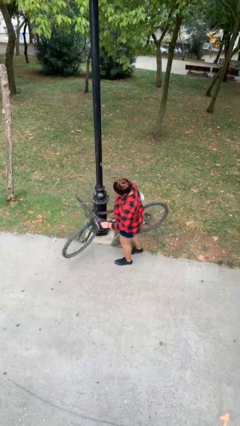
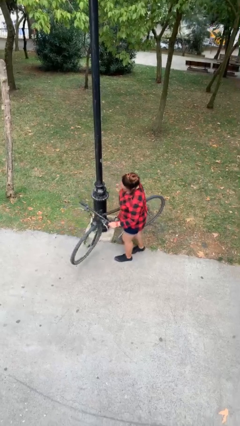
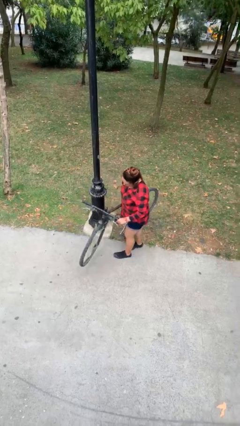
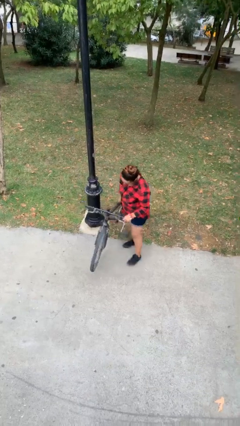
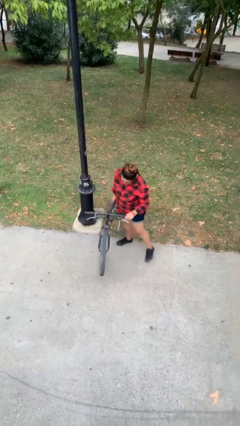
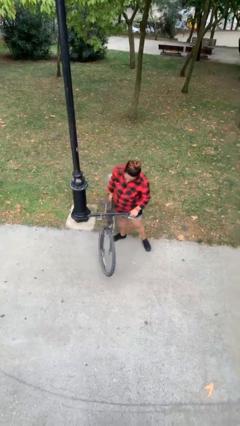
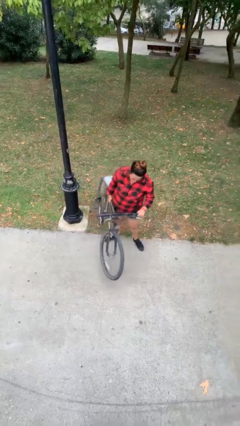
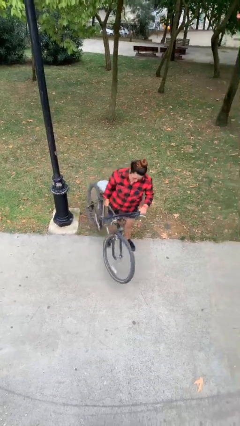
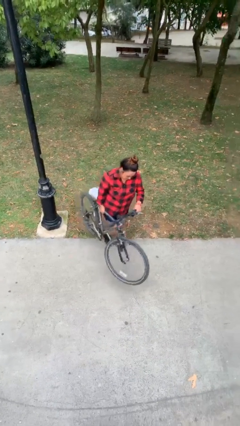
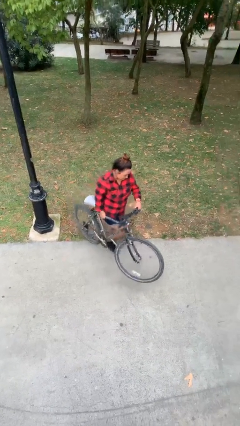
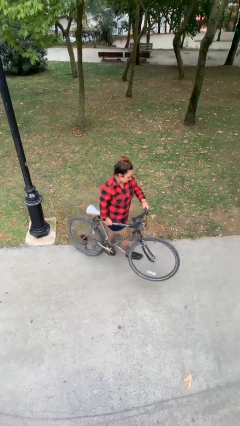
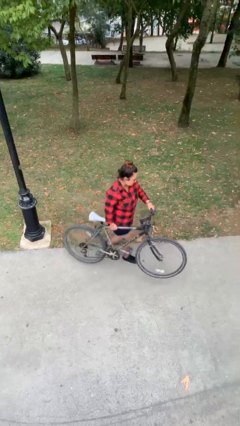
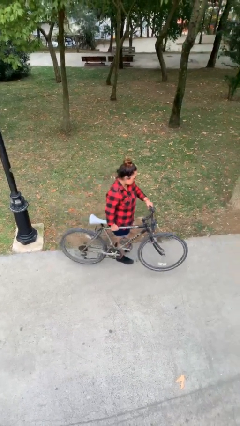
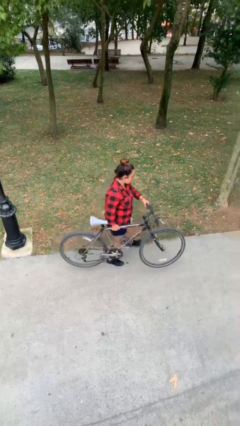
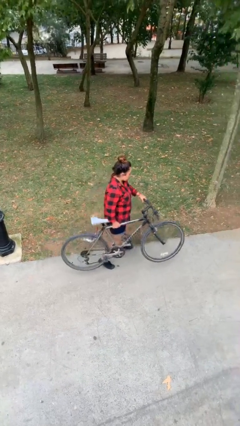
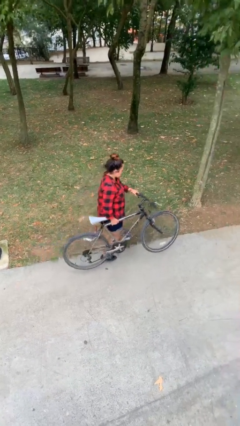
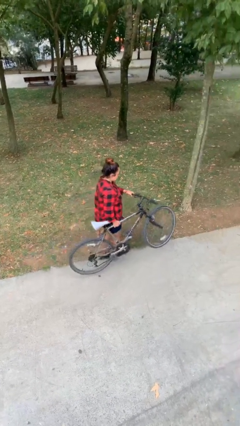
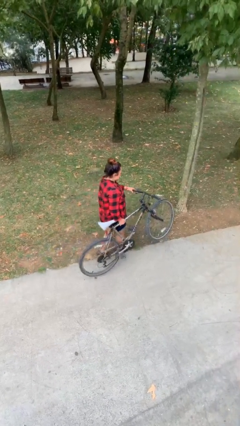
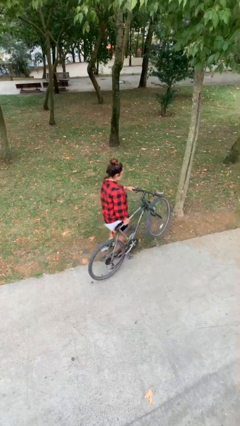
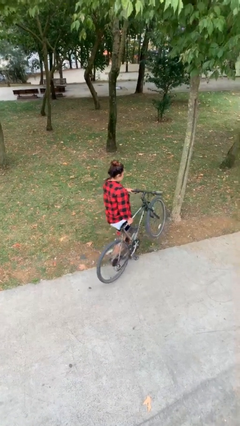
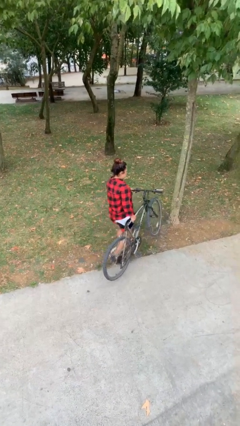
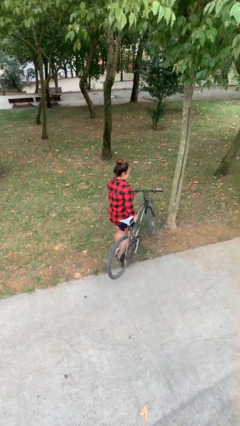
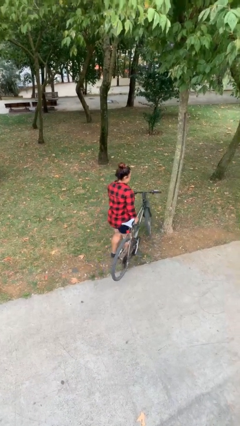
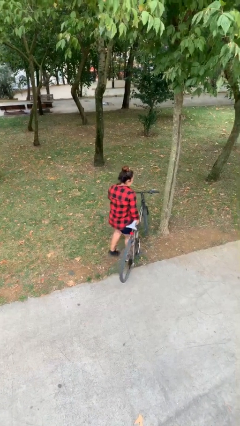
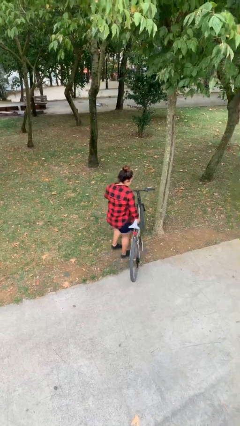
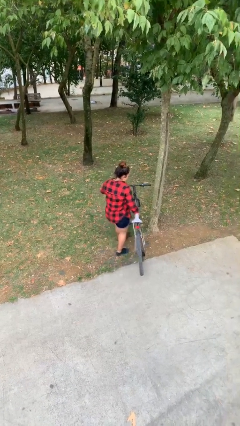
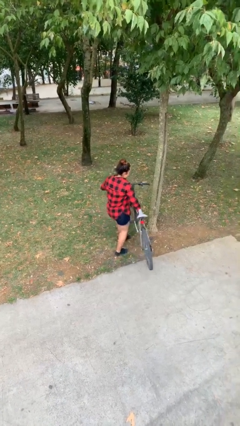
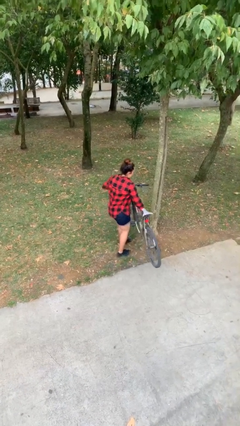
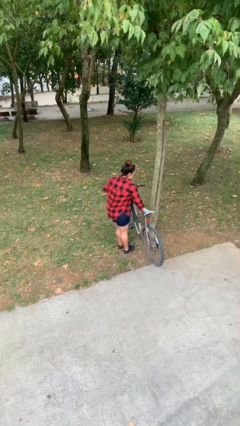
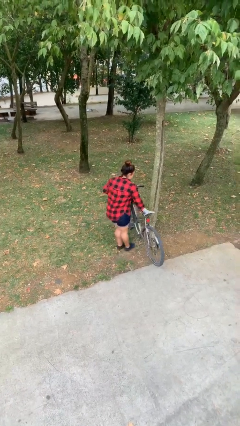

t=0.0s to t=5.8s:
person carries heavy object

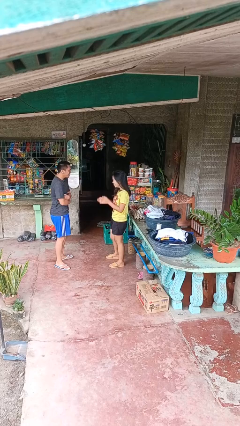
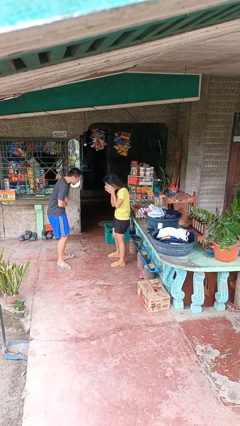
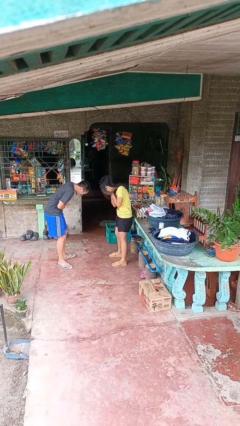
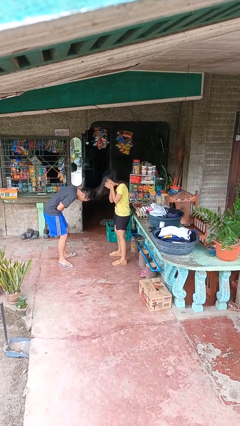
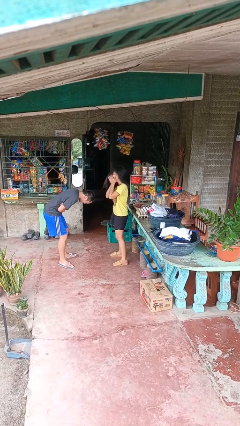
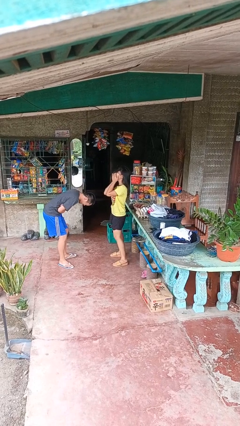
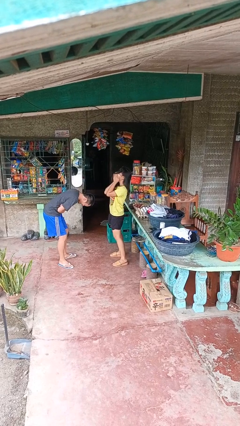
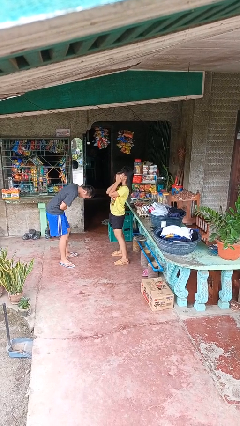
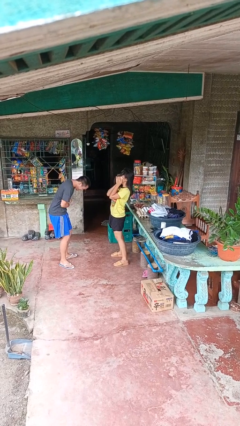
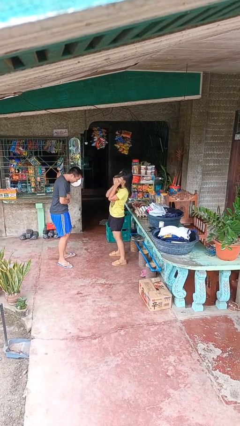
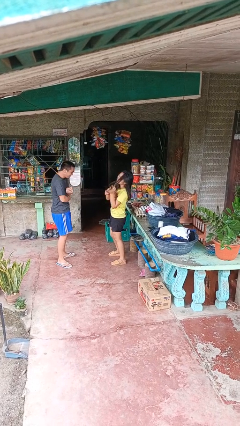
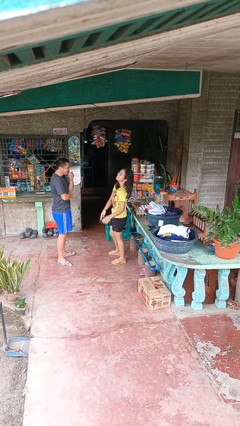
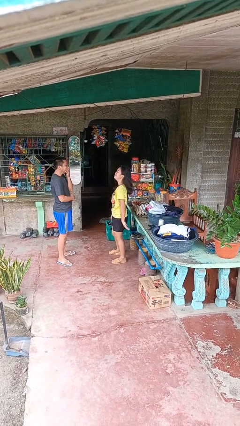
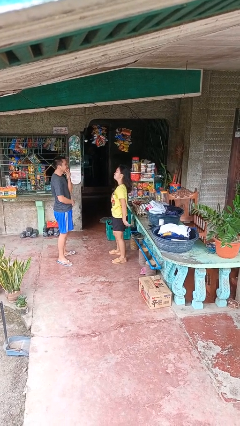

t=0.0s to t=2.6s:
person laughs with person

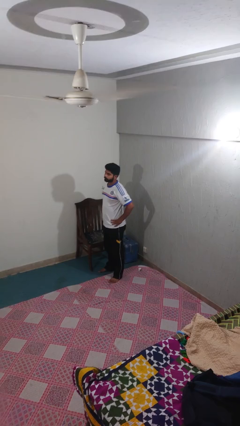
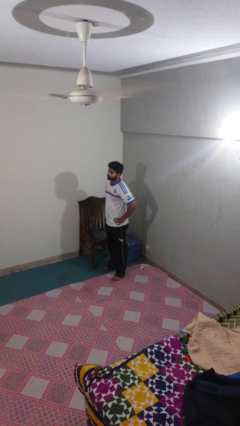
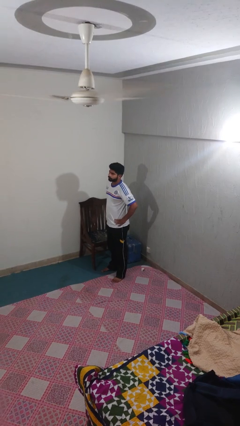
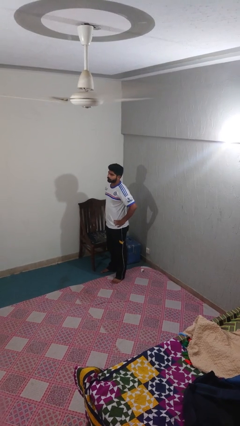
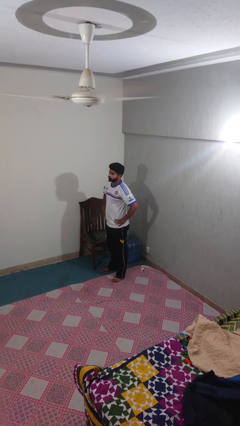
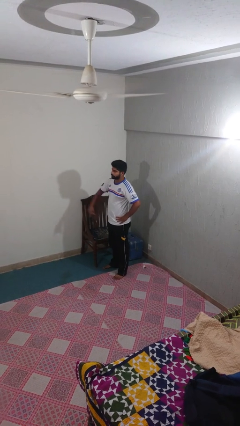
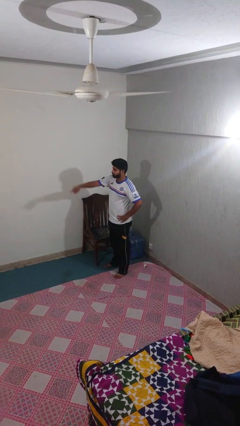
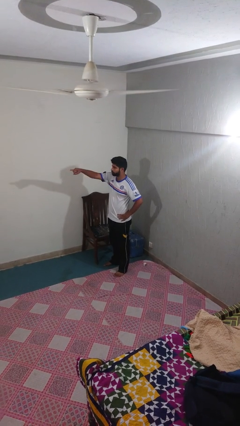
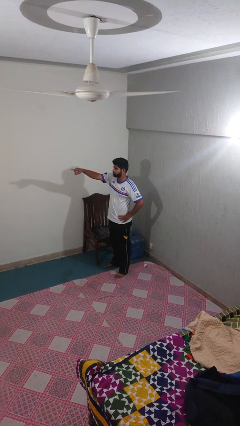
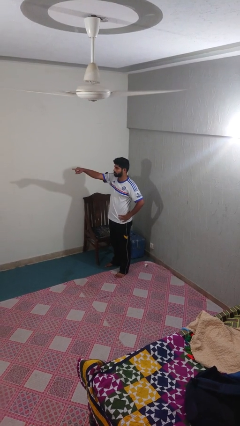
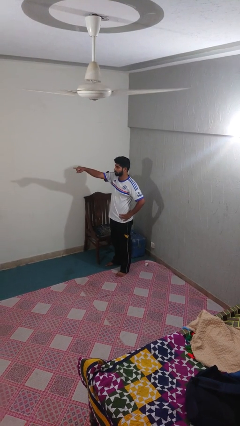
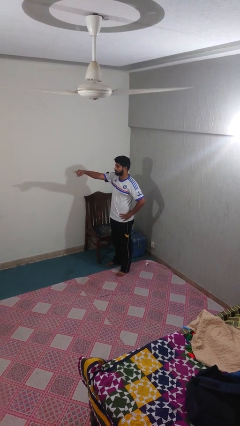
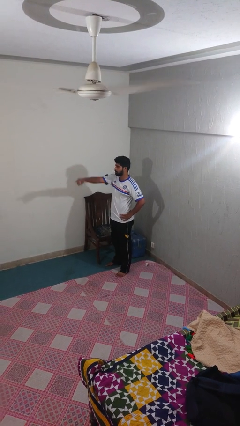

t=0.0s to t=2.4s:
person points at person

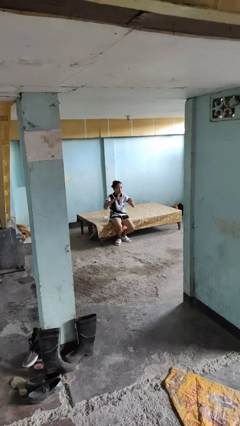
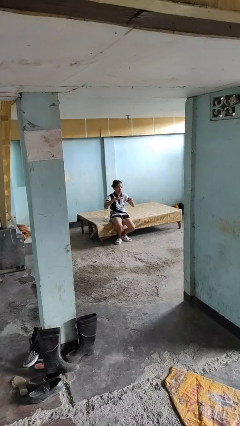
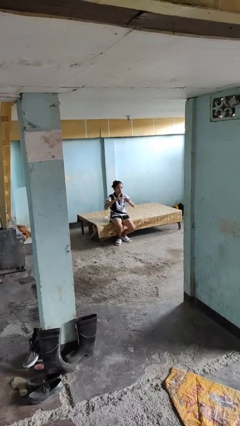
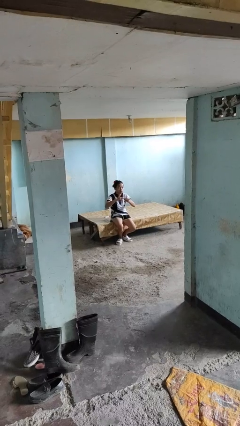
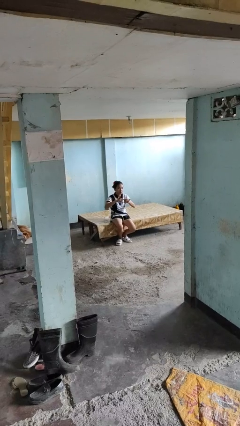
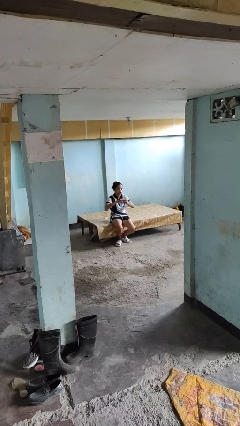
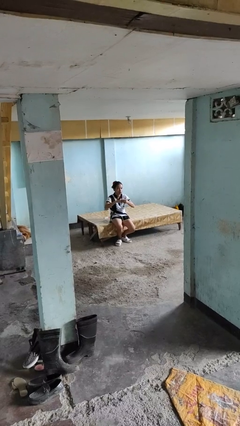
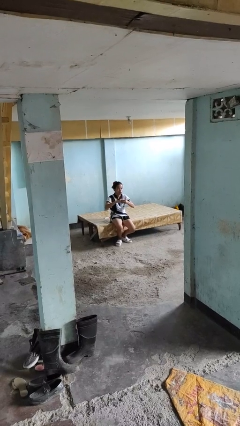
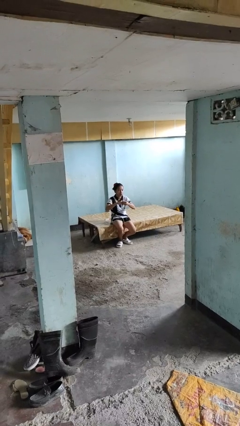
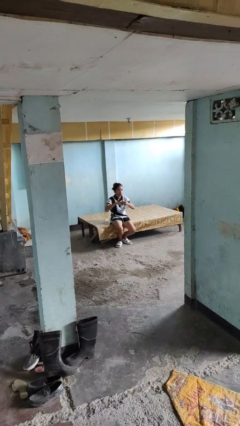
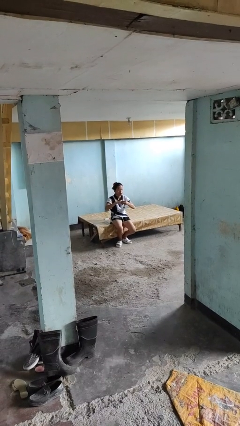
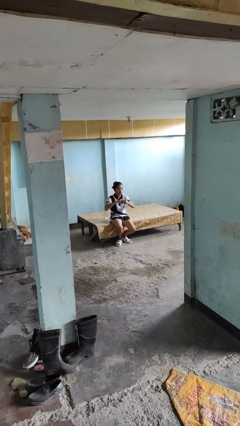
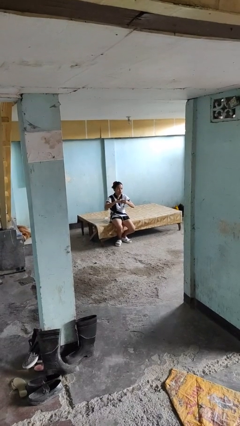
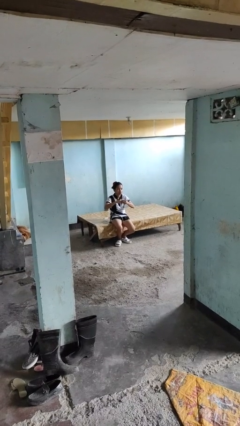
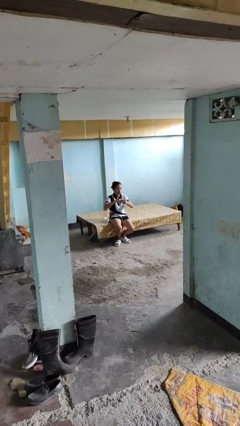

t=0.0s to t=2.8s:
person puts on ring

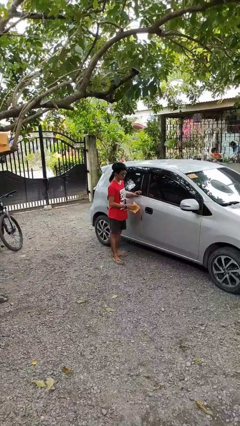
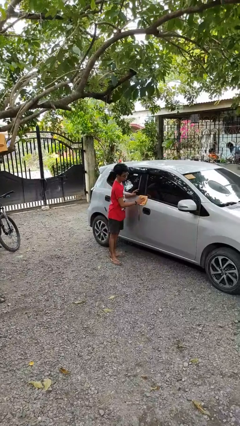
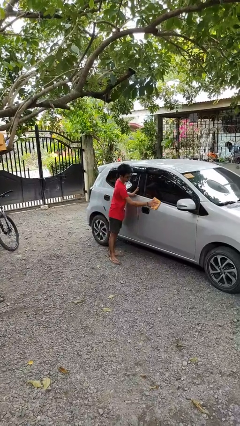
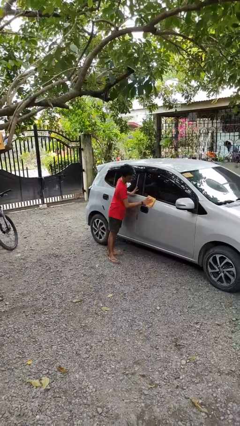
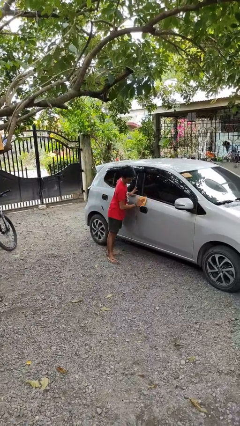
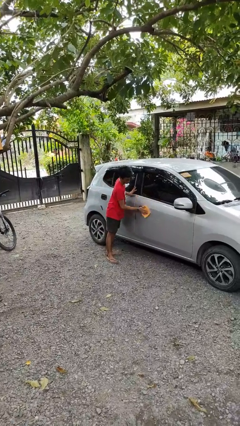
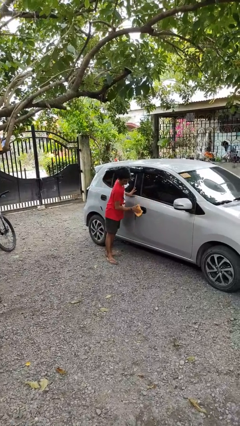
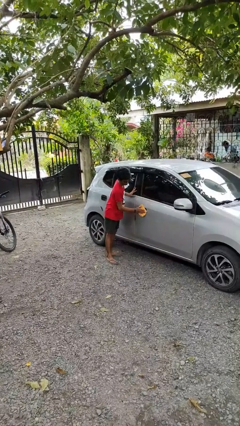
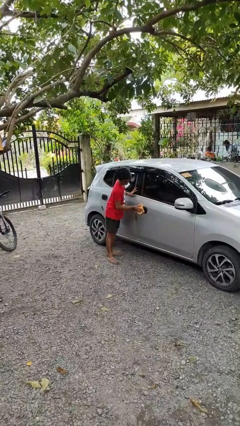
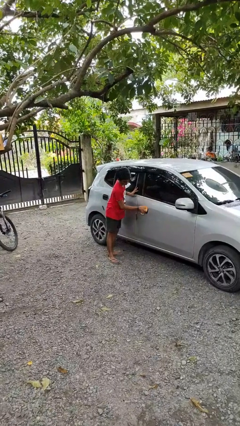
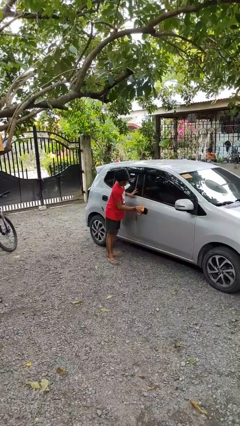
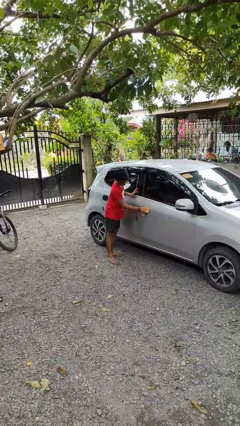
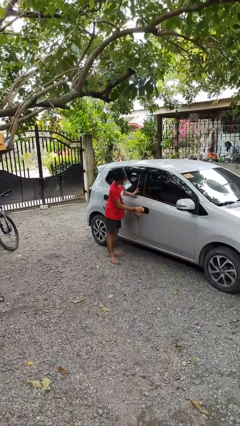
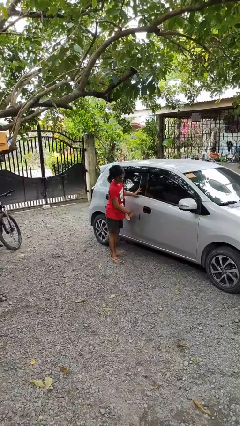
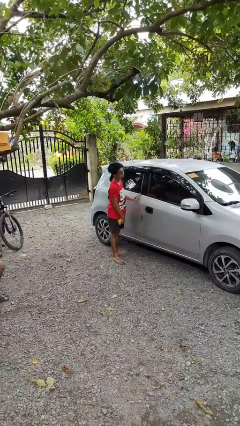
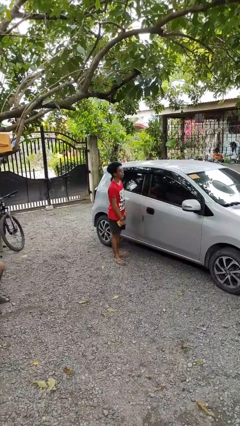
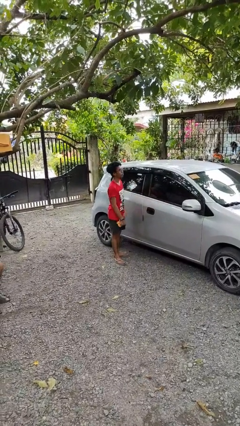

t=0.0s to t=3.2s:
person polishes car with rag

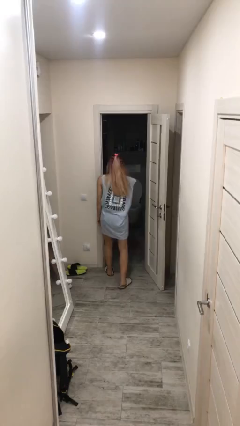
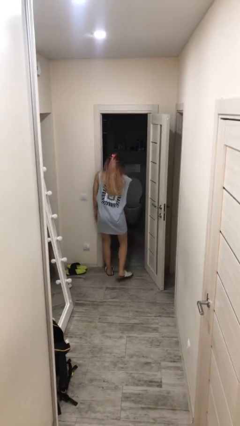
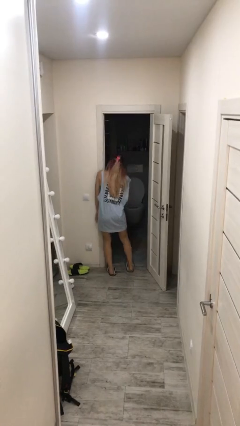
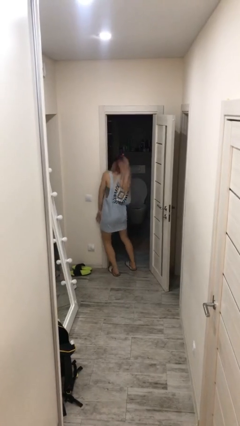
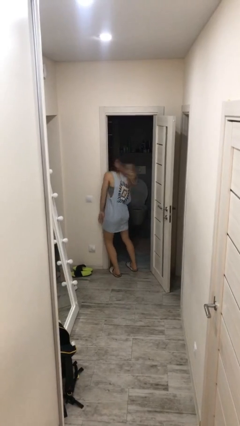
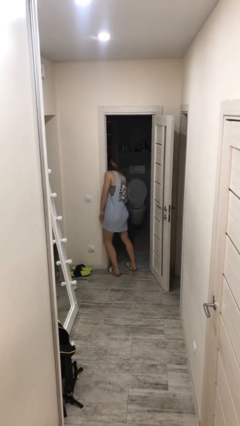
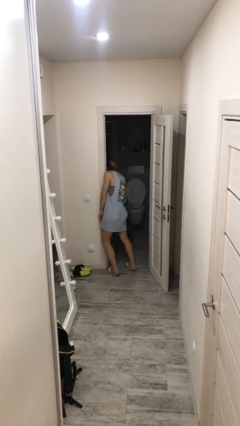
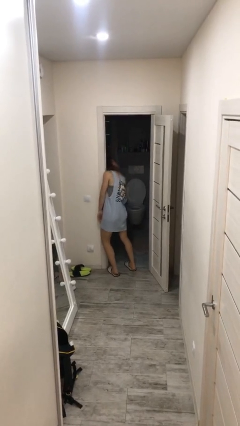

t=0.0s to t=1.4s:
person bumps into wall
